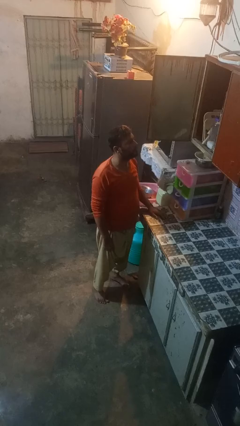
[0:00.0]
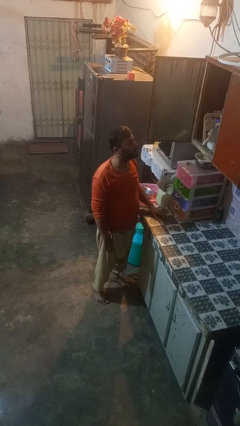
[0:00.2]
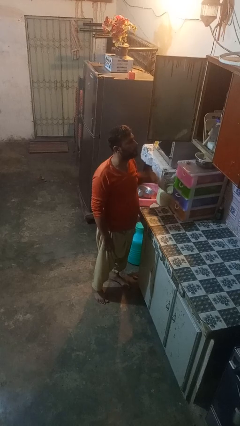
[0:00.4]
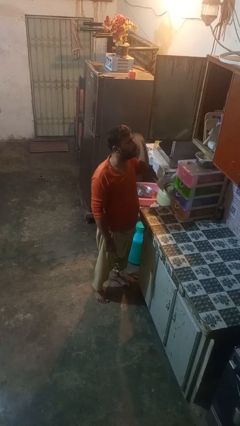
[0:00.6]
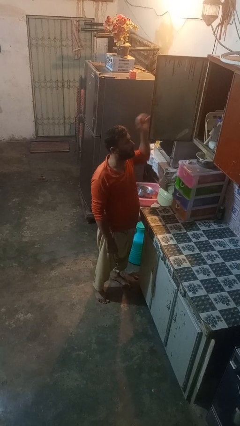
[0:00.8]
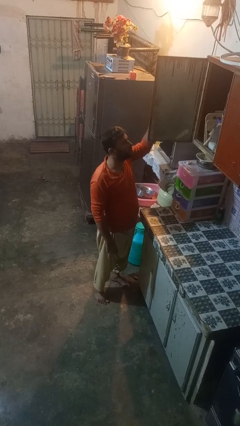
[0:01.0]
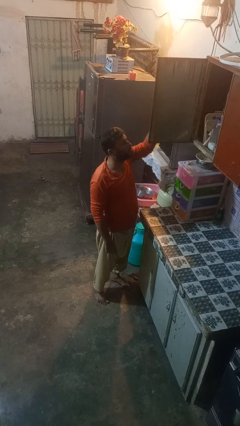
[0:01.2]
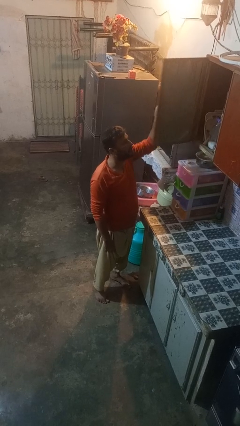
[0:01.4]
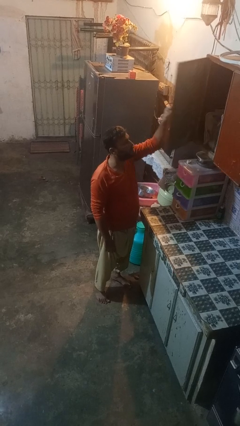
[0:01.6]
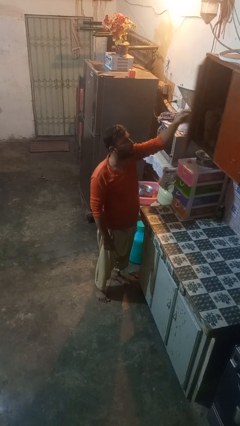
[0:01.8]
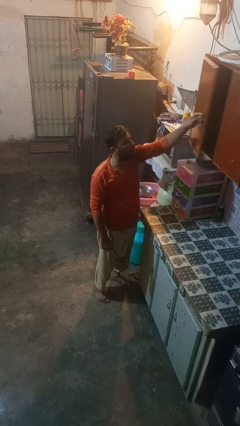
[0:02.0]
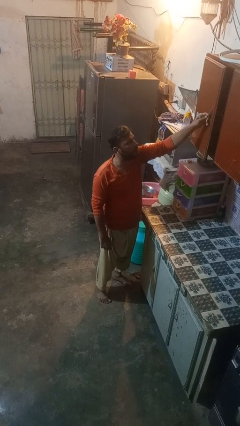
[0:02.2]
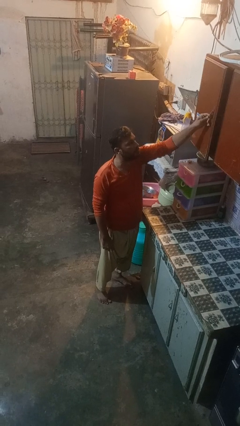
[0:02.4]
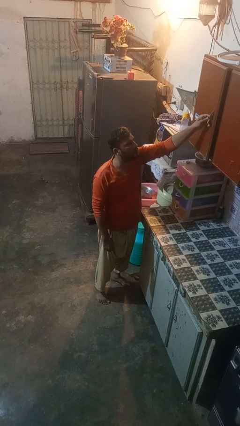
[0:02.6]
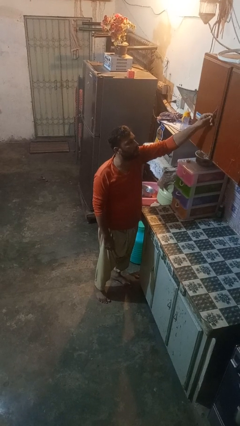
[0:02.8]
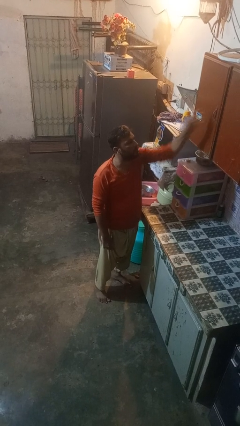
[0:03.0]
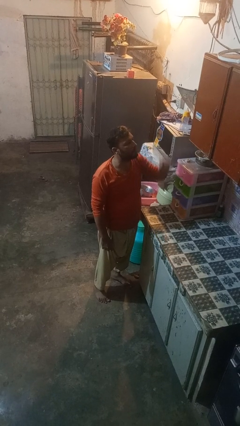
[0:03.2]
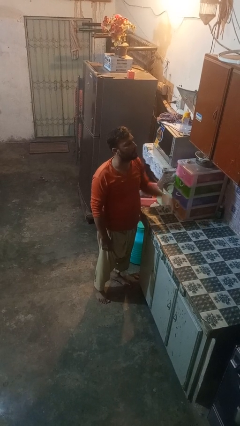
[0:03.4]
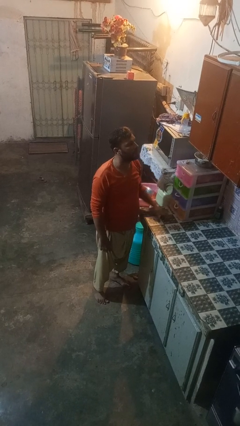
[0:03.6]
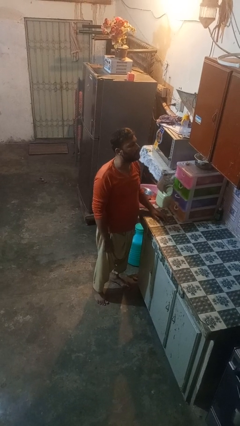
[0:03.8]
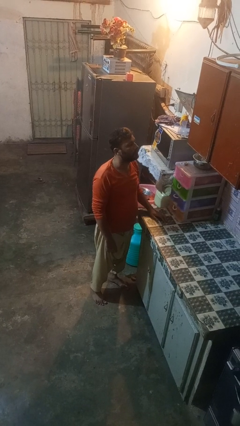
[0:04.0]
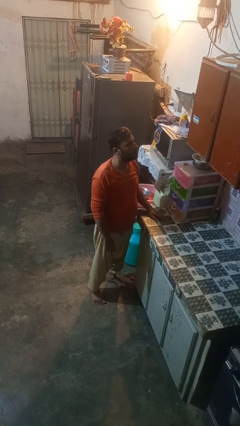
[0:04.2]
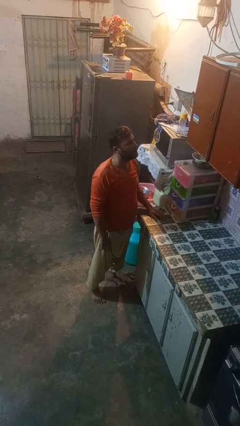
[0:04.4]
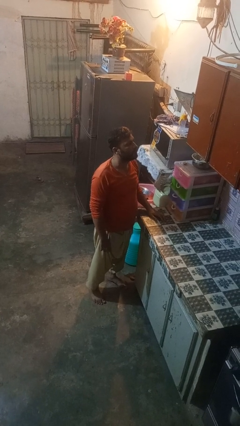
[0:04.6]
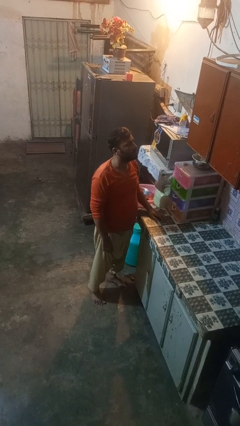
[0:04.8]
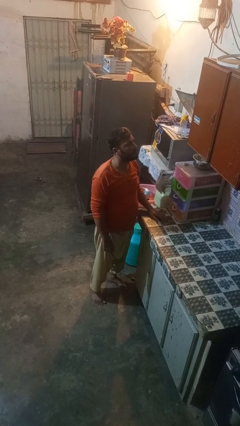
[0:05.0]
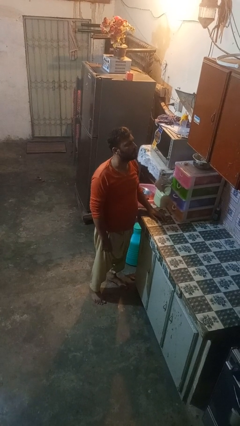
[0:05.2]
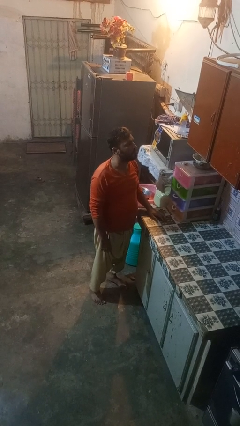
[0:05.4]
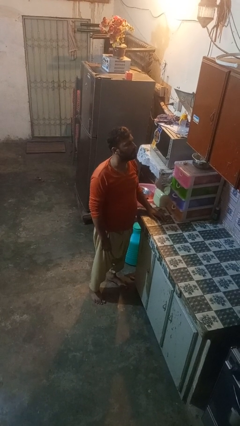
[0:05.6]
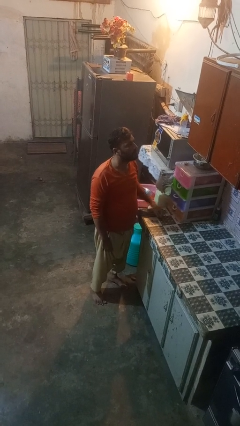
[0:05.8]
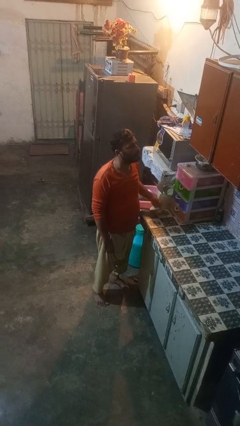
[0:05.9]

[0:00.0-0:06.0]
person closes cabinet

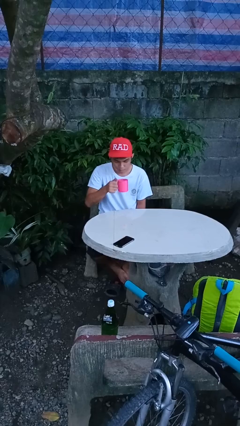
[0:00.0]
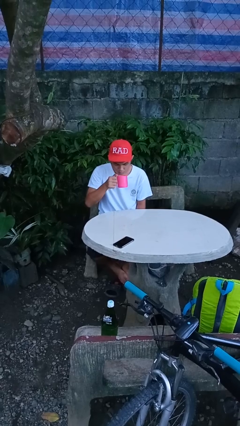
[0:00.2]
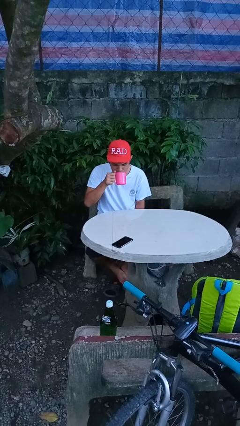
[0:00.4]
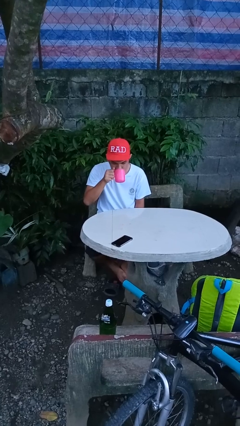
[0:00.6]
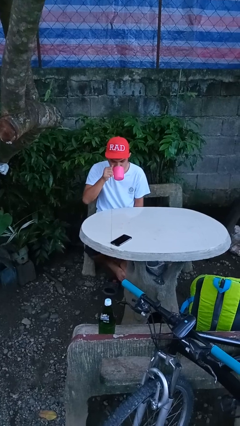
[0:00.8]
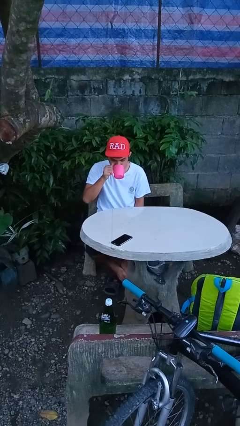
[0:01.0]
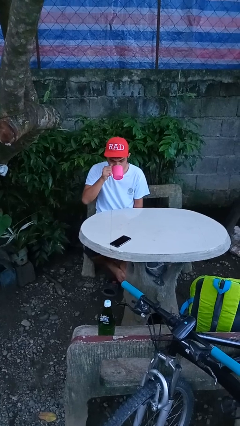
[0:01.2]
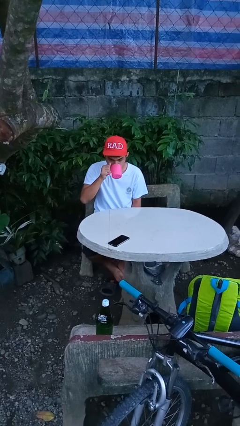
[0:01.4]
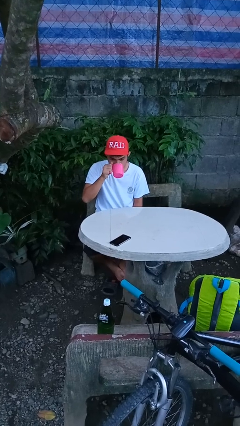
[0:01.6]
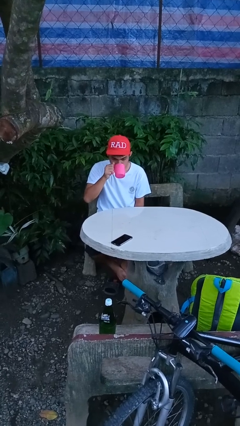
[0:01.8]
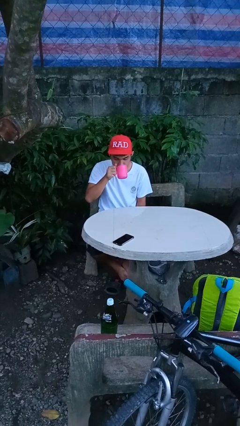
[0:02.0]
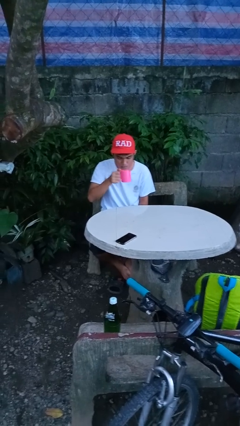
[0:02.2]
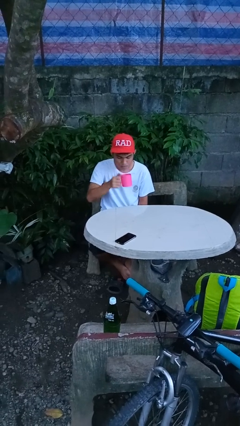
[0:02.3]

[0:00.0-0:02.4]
person drinks from mug

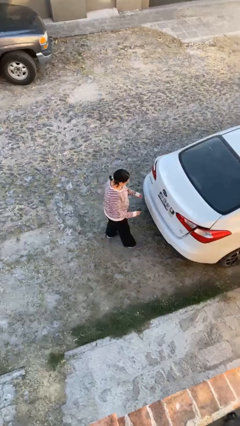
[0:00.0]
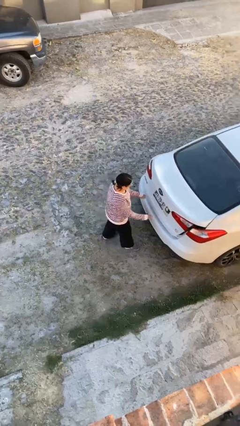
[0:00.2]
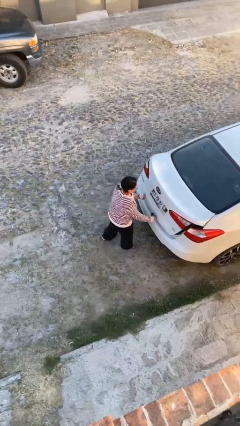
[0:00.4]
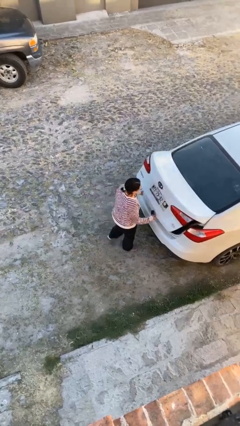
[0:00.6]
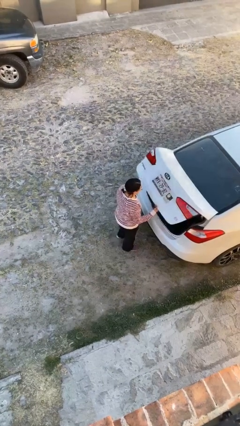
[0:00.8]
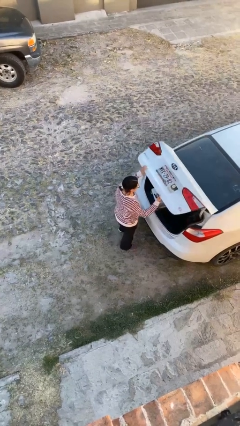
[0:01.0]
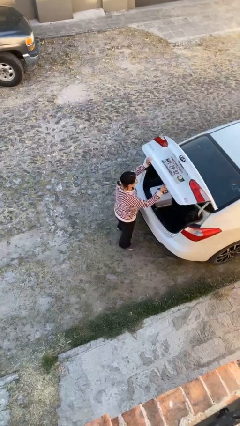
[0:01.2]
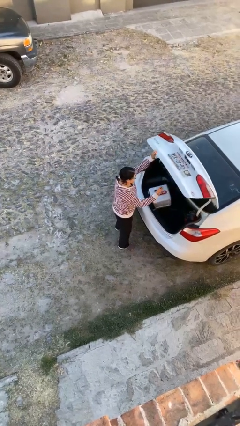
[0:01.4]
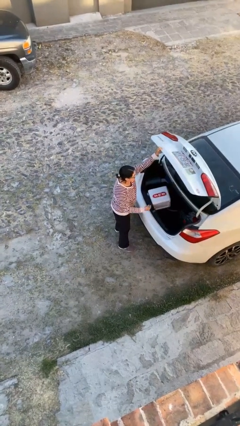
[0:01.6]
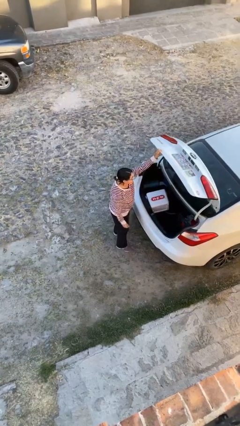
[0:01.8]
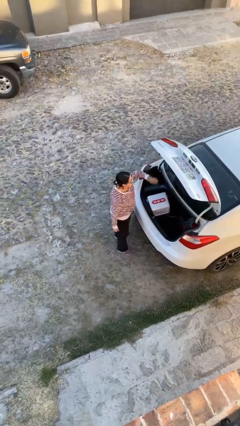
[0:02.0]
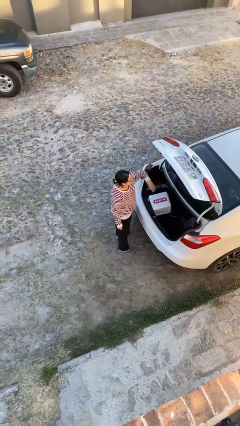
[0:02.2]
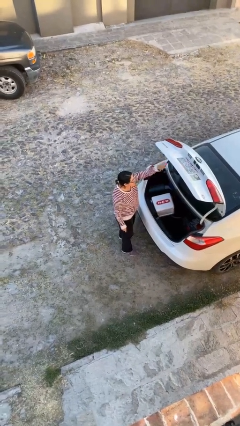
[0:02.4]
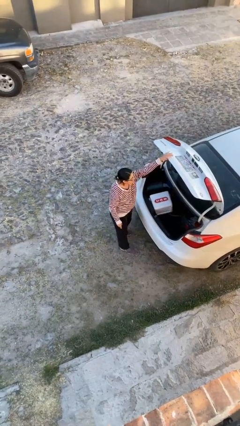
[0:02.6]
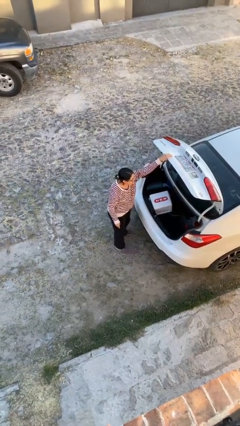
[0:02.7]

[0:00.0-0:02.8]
person opens car trunk

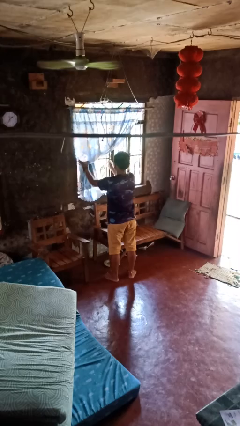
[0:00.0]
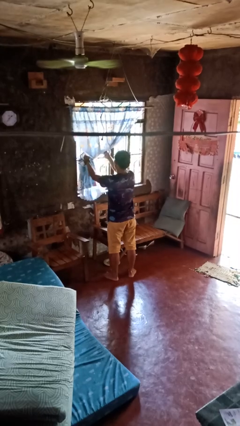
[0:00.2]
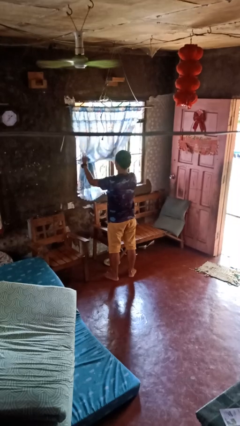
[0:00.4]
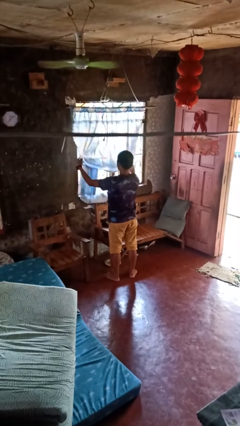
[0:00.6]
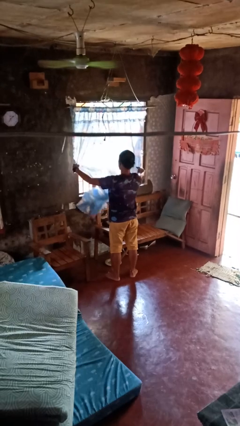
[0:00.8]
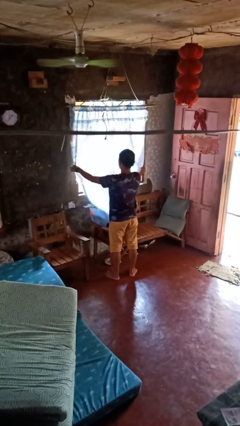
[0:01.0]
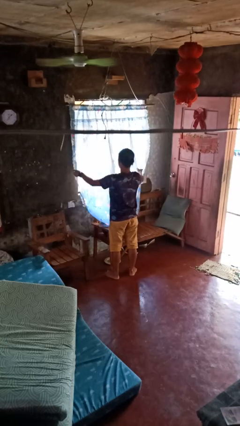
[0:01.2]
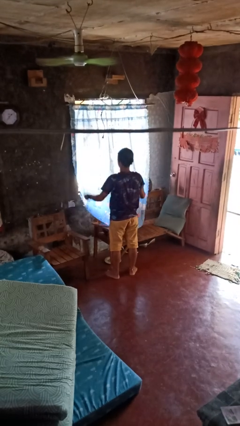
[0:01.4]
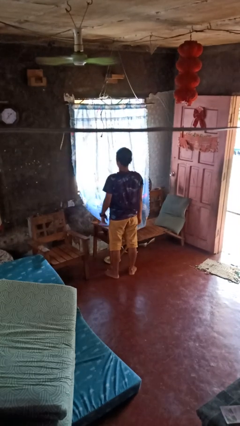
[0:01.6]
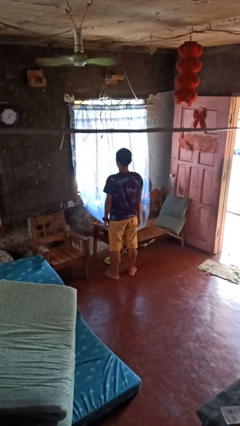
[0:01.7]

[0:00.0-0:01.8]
person closes curtains

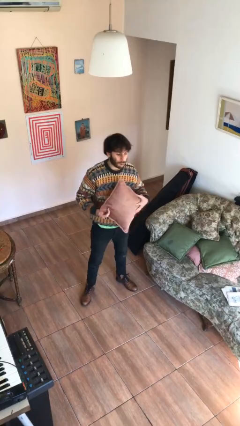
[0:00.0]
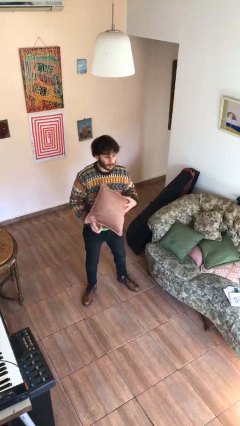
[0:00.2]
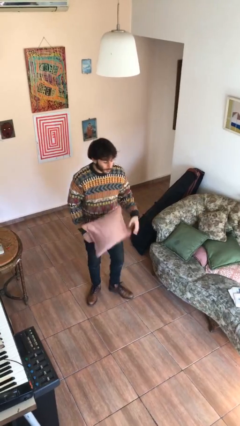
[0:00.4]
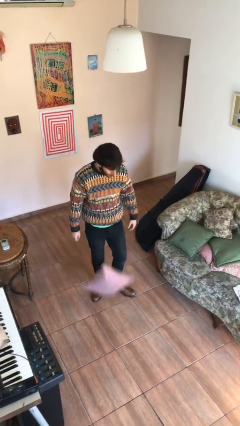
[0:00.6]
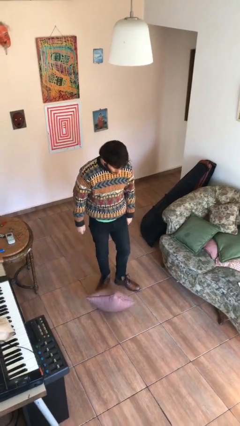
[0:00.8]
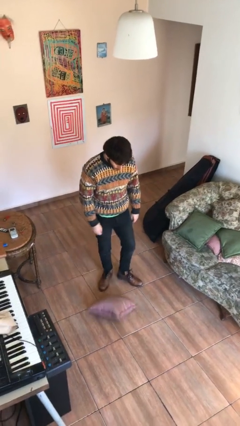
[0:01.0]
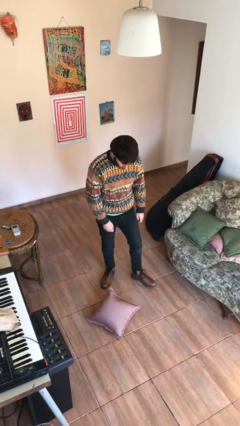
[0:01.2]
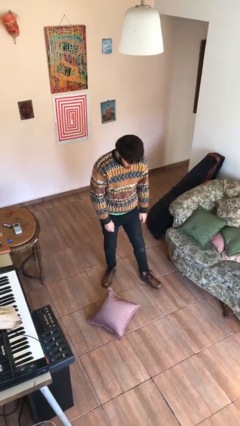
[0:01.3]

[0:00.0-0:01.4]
person drops object

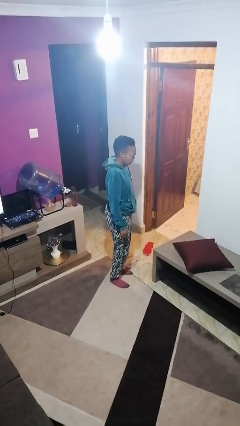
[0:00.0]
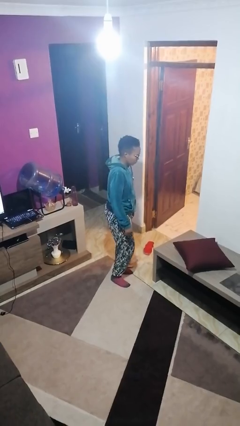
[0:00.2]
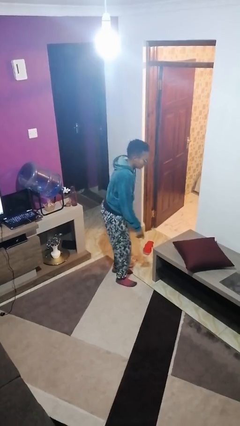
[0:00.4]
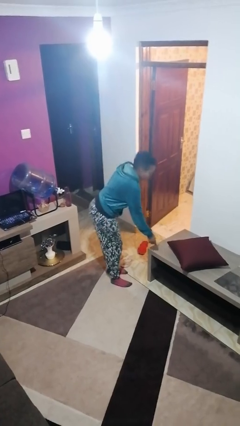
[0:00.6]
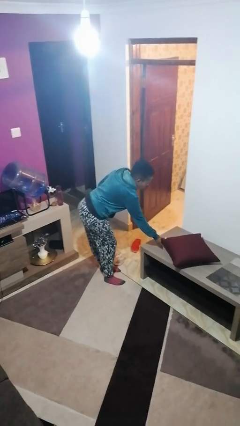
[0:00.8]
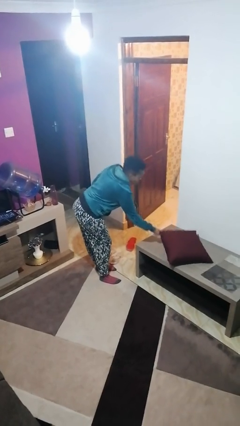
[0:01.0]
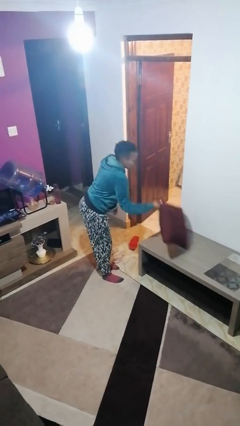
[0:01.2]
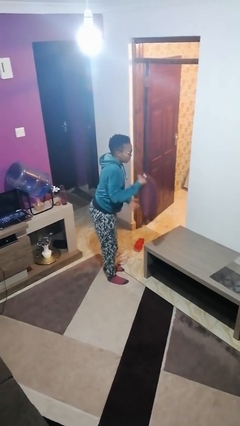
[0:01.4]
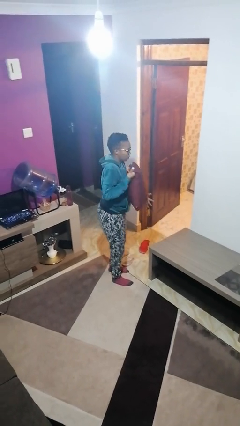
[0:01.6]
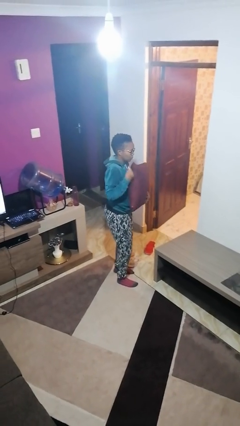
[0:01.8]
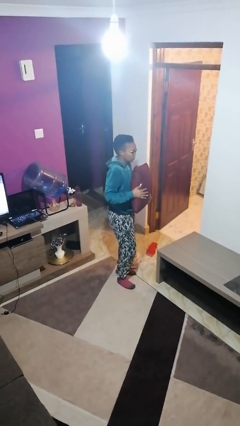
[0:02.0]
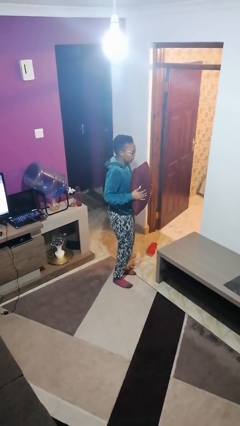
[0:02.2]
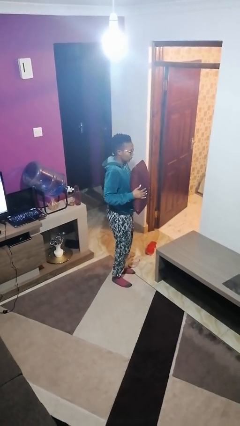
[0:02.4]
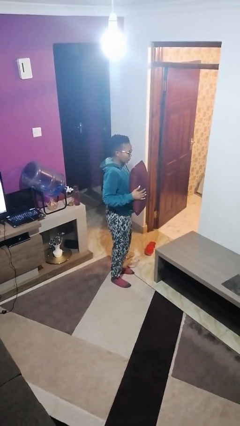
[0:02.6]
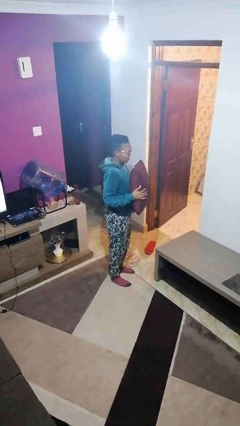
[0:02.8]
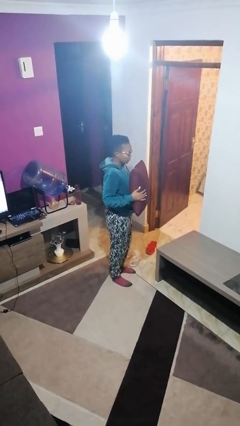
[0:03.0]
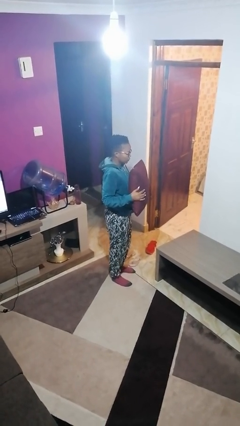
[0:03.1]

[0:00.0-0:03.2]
person picks up object from table
